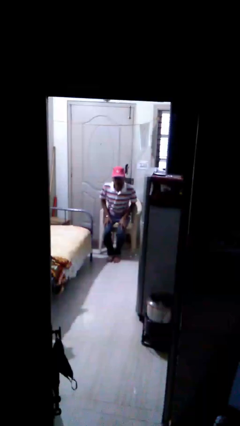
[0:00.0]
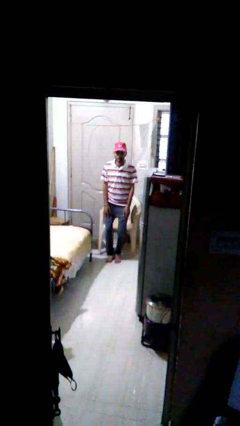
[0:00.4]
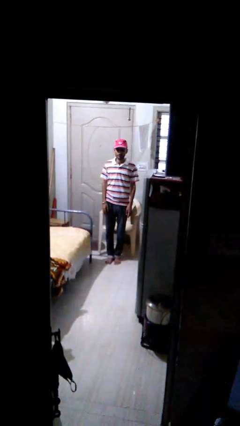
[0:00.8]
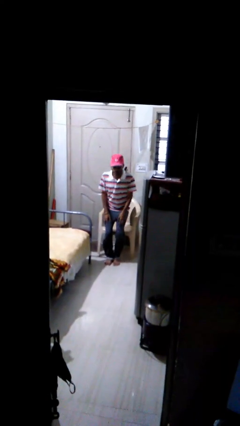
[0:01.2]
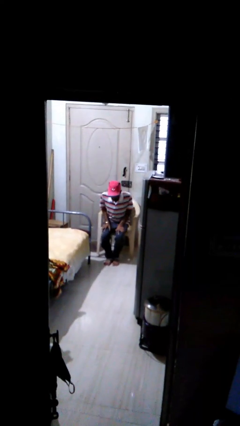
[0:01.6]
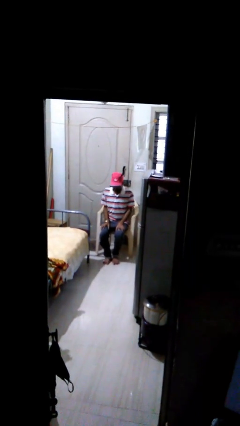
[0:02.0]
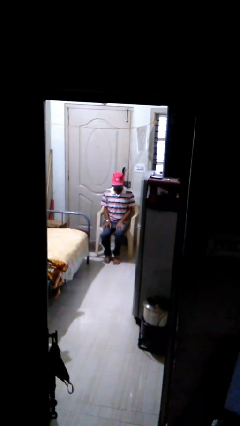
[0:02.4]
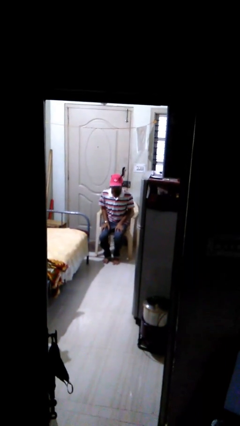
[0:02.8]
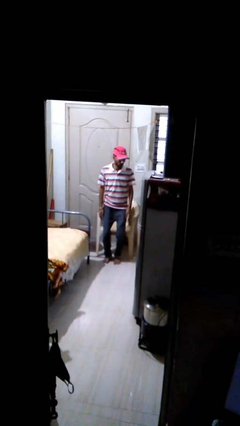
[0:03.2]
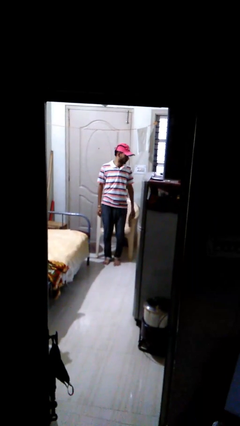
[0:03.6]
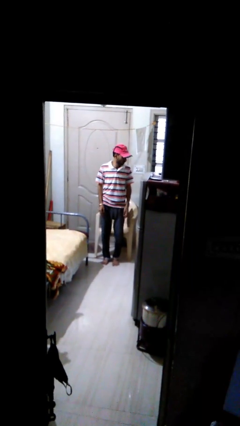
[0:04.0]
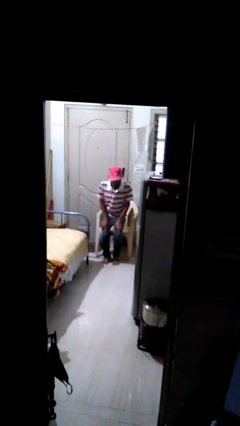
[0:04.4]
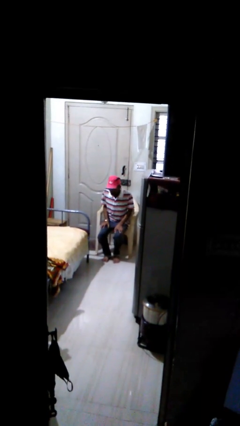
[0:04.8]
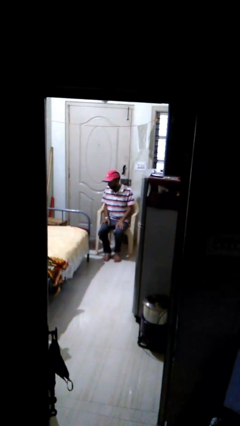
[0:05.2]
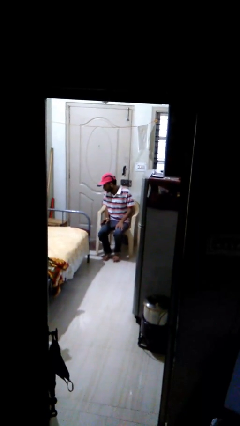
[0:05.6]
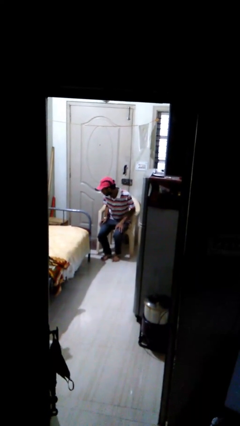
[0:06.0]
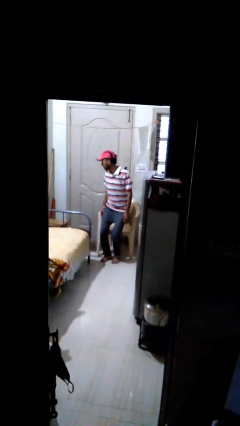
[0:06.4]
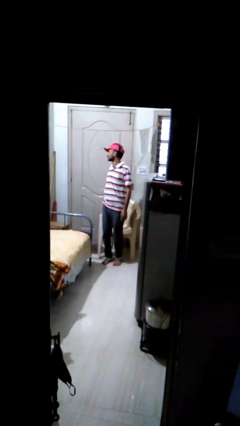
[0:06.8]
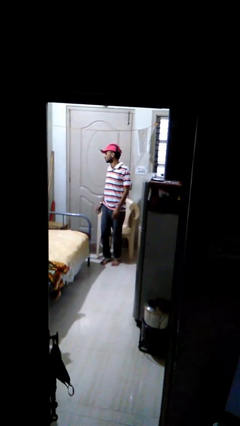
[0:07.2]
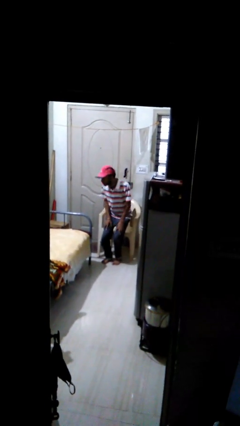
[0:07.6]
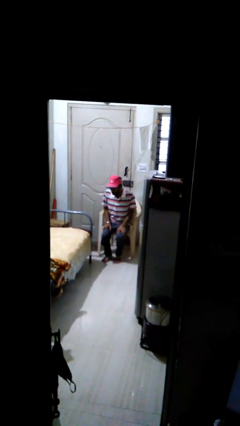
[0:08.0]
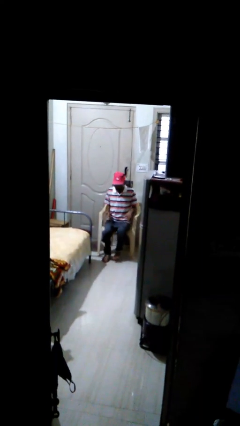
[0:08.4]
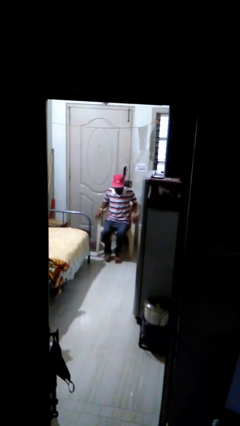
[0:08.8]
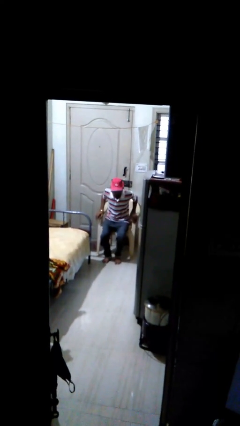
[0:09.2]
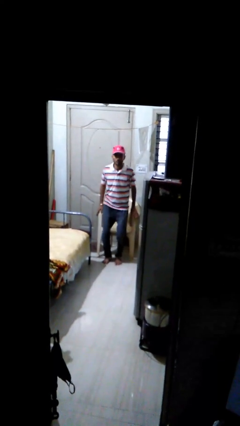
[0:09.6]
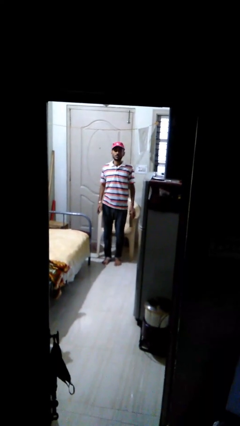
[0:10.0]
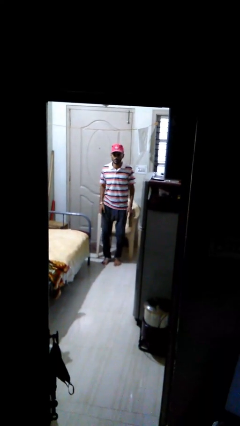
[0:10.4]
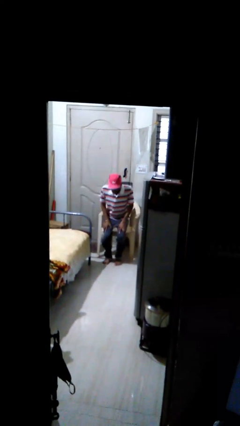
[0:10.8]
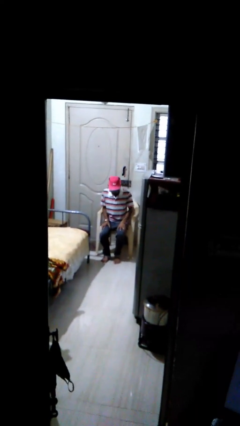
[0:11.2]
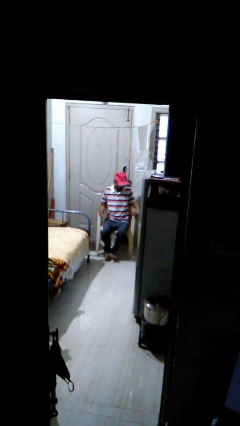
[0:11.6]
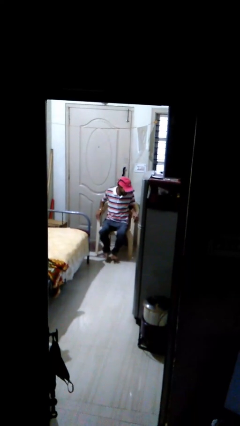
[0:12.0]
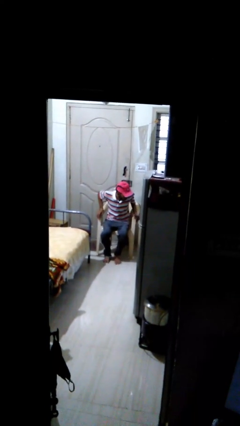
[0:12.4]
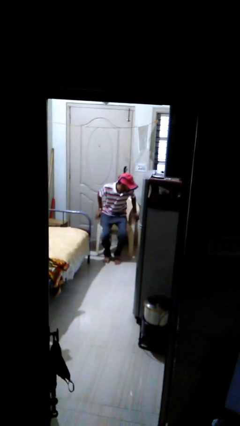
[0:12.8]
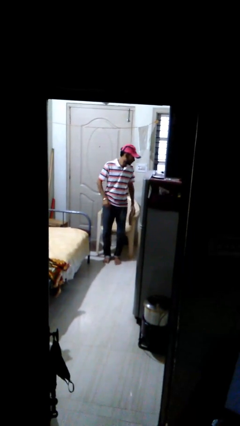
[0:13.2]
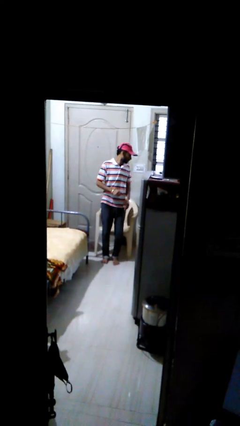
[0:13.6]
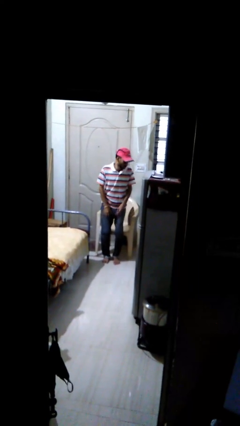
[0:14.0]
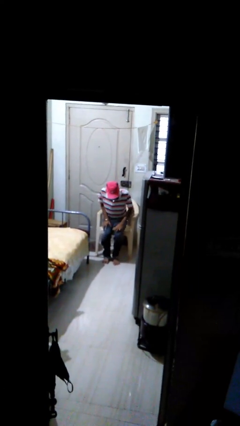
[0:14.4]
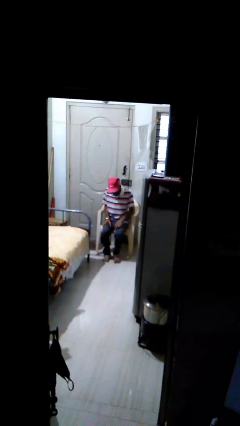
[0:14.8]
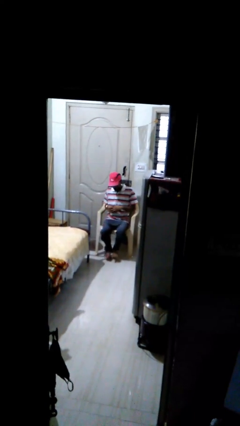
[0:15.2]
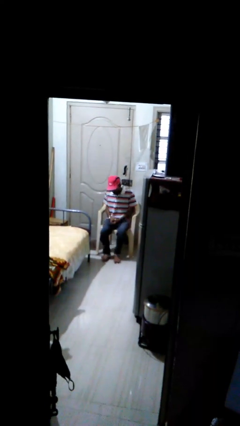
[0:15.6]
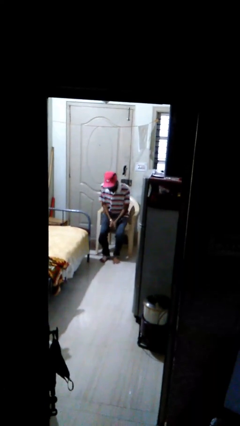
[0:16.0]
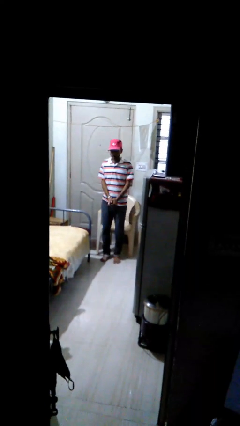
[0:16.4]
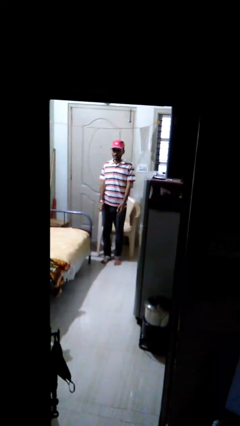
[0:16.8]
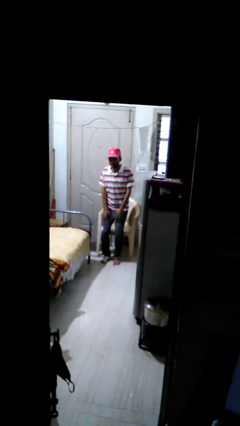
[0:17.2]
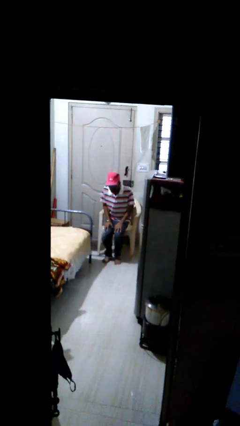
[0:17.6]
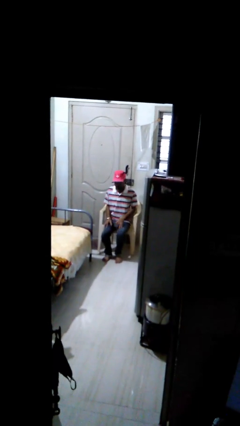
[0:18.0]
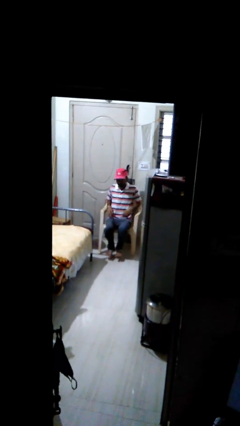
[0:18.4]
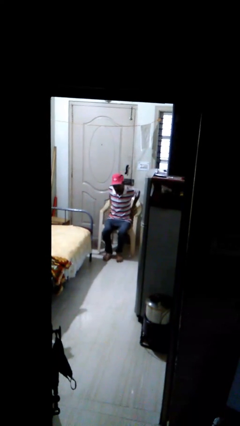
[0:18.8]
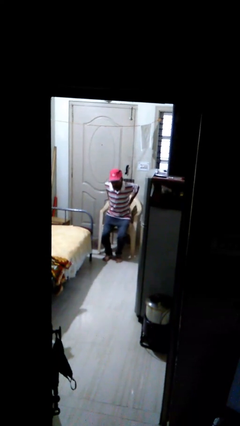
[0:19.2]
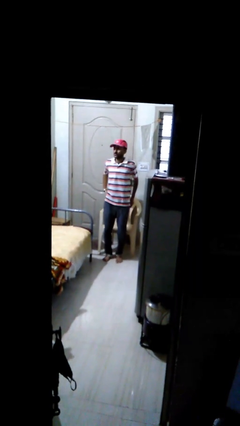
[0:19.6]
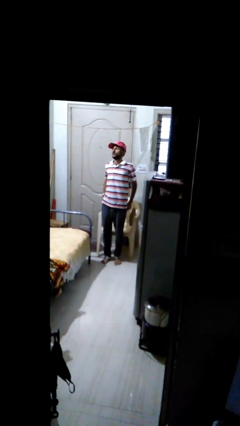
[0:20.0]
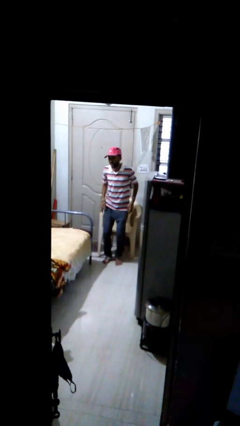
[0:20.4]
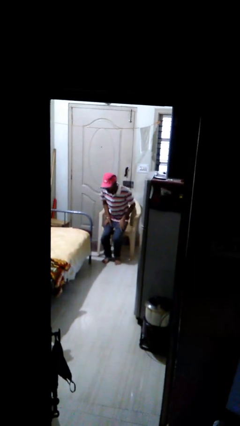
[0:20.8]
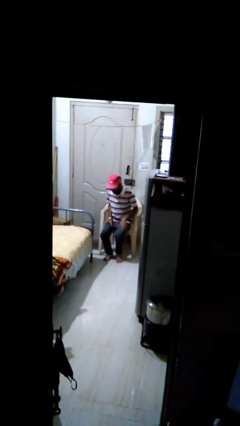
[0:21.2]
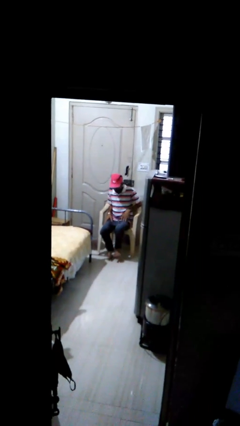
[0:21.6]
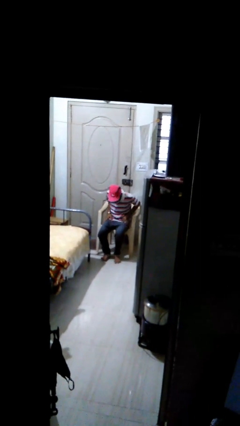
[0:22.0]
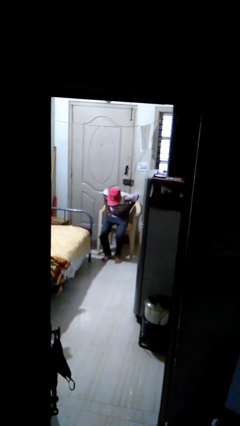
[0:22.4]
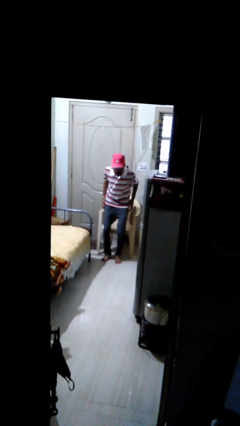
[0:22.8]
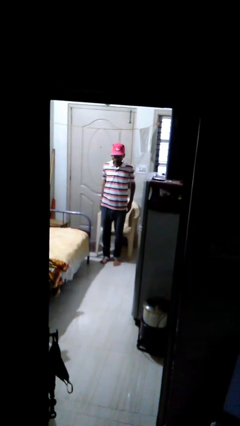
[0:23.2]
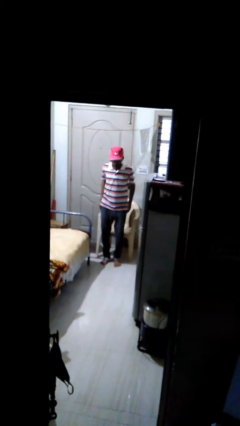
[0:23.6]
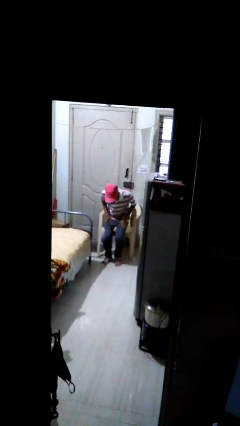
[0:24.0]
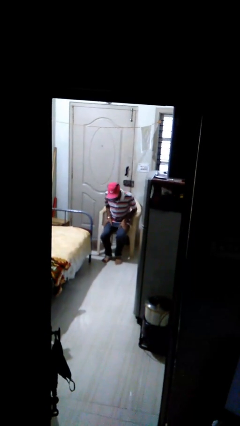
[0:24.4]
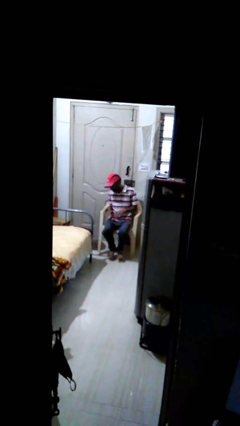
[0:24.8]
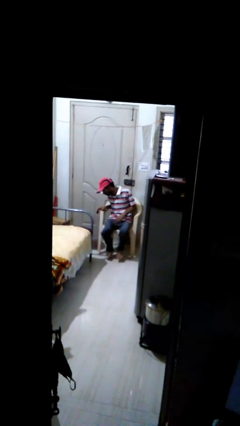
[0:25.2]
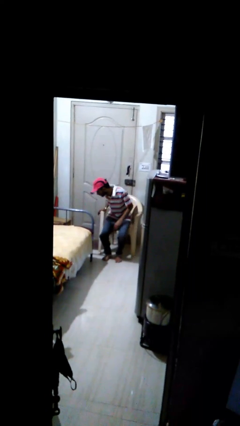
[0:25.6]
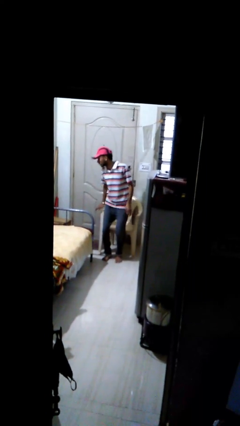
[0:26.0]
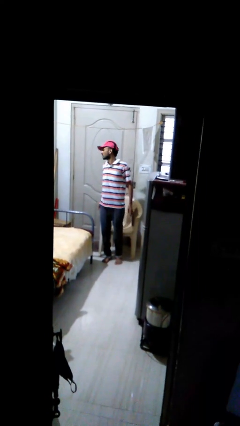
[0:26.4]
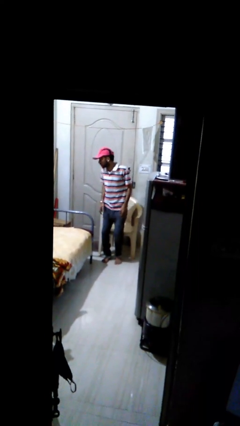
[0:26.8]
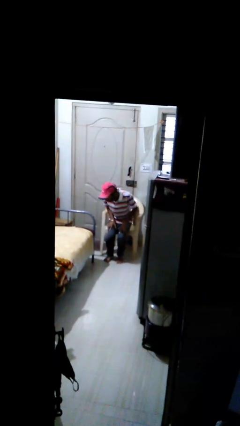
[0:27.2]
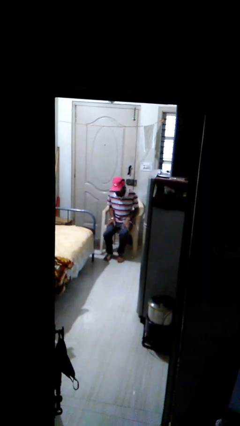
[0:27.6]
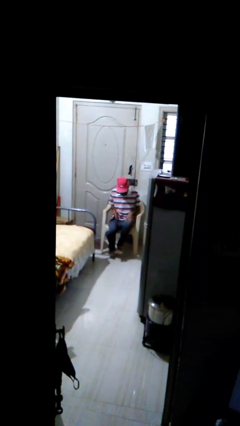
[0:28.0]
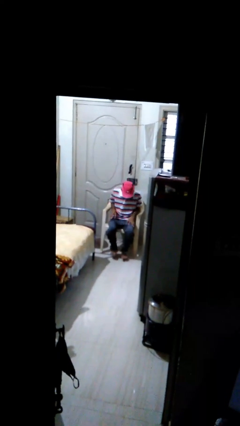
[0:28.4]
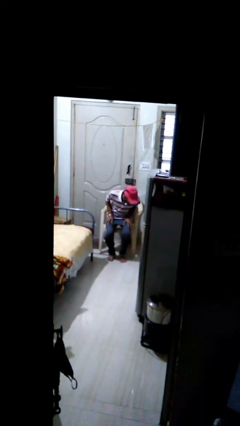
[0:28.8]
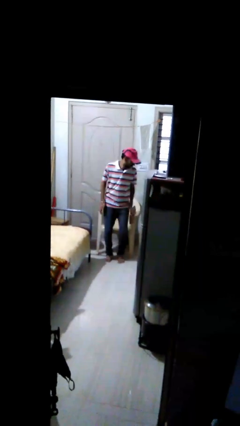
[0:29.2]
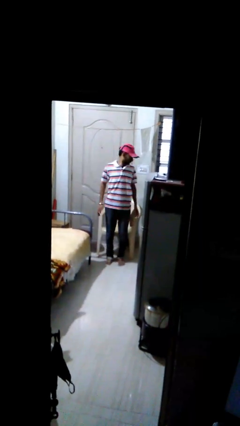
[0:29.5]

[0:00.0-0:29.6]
person stands up

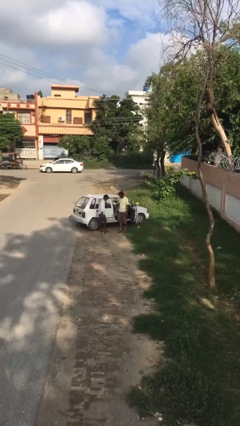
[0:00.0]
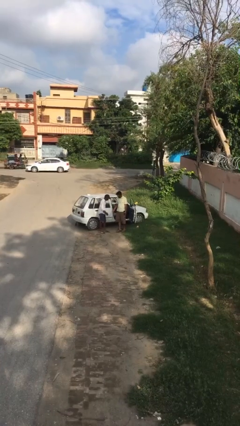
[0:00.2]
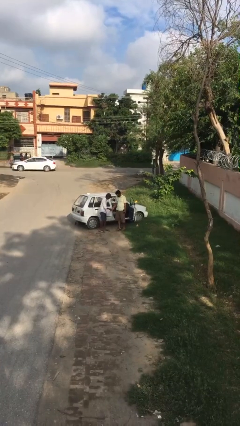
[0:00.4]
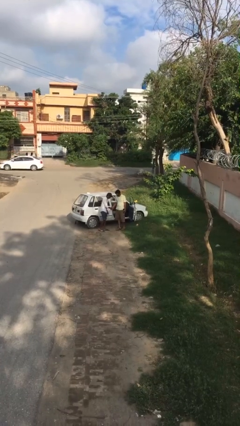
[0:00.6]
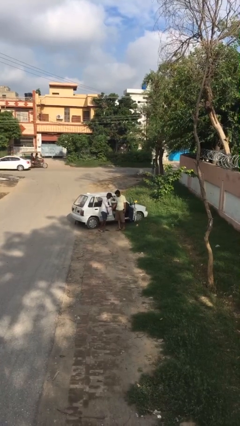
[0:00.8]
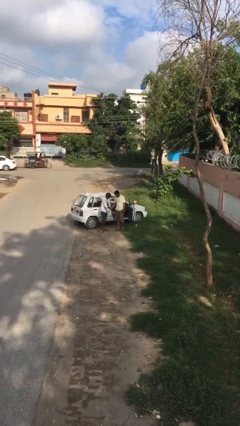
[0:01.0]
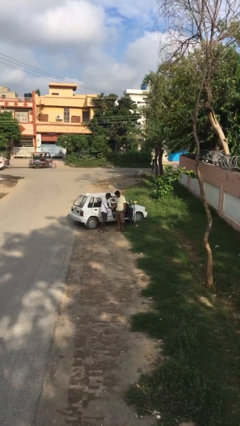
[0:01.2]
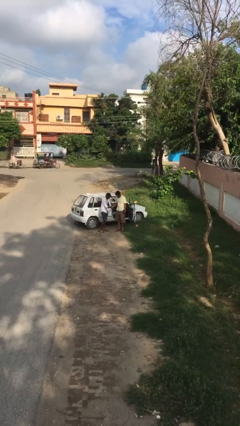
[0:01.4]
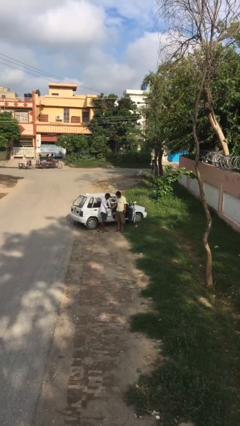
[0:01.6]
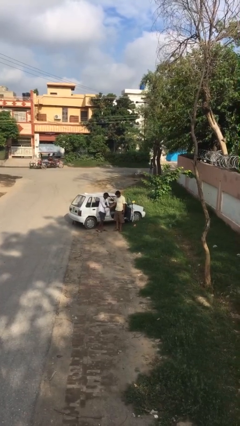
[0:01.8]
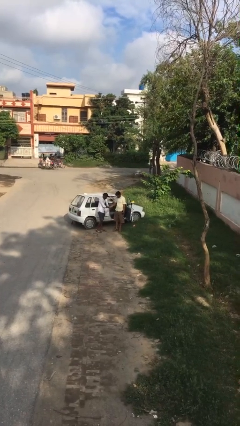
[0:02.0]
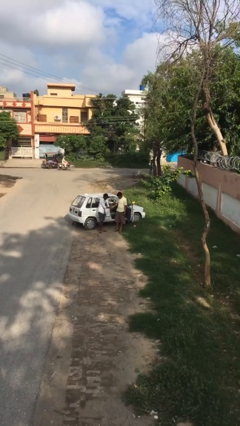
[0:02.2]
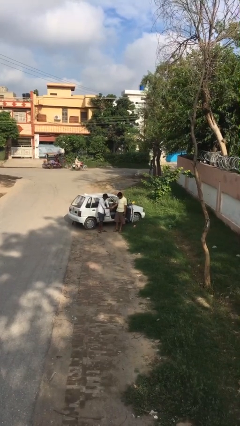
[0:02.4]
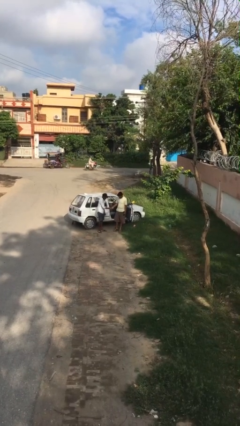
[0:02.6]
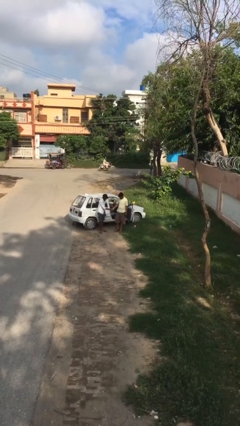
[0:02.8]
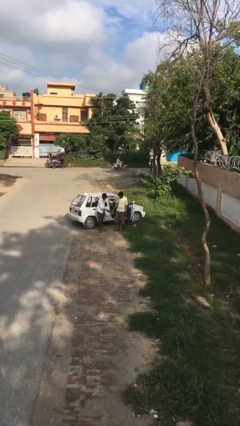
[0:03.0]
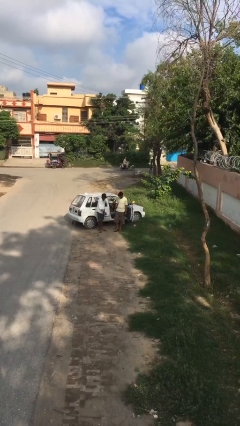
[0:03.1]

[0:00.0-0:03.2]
person shakes hand
